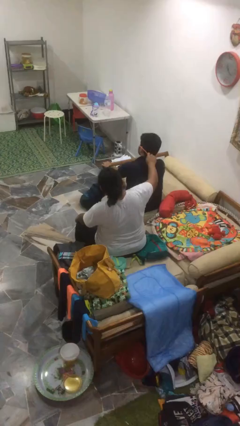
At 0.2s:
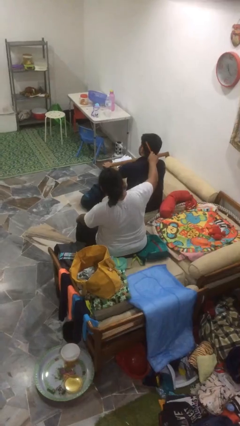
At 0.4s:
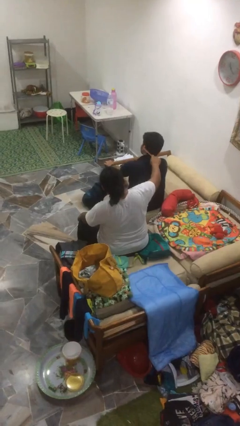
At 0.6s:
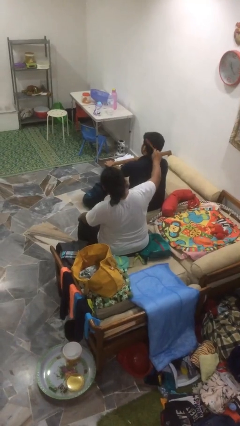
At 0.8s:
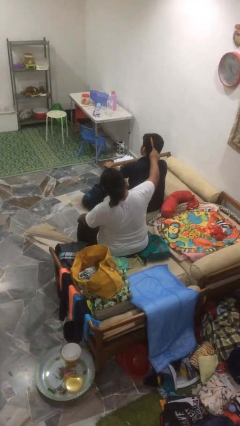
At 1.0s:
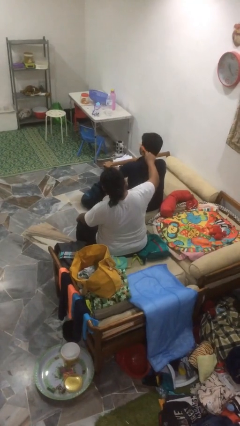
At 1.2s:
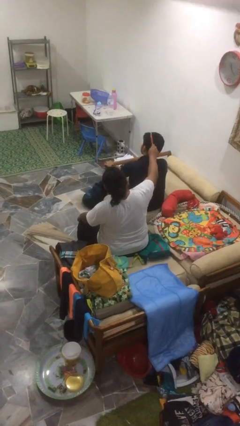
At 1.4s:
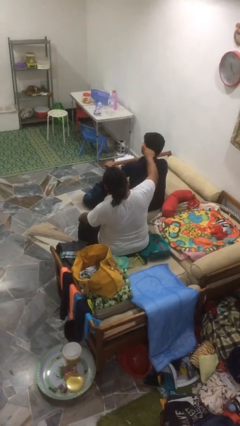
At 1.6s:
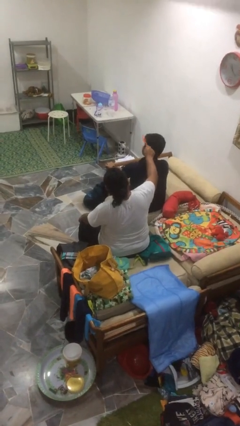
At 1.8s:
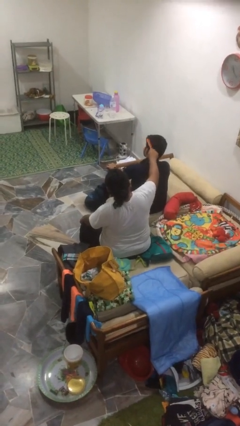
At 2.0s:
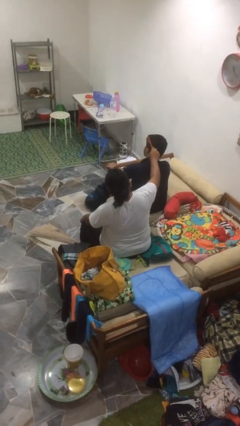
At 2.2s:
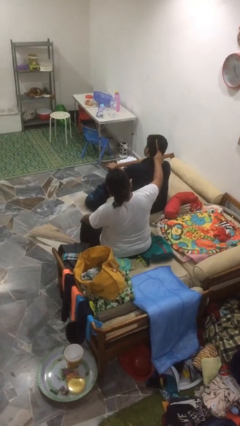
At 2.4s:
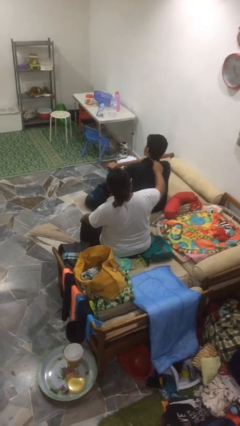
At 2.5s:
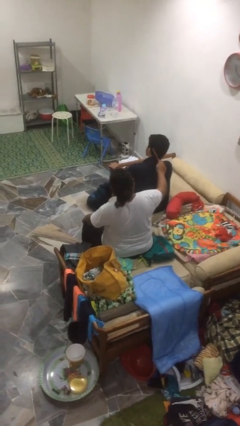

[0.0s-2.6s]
person brushes hair of person

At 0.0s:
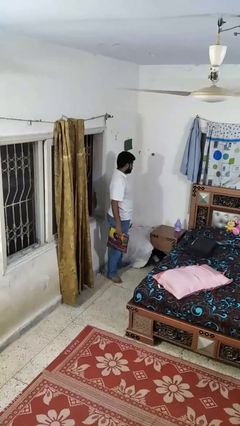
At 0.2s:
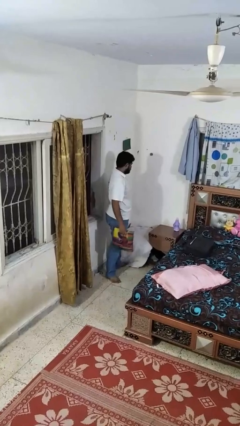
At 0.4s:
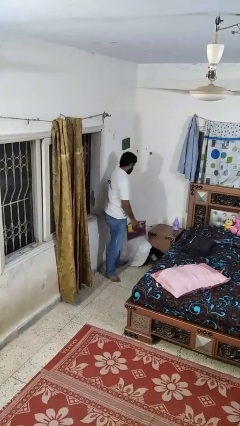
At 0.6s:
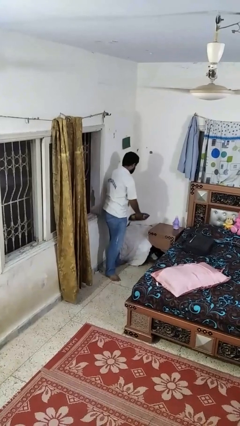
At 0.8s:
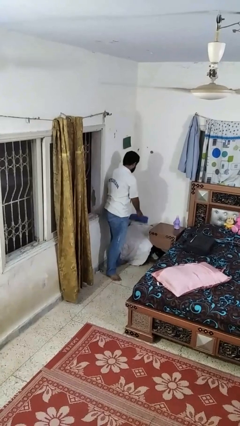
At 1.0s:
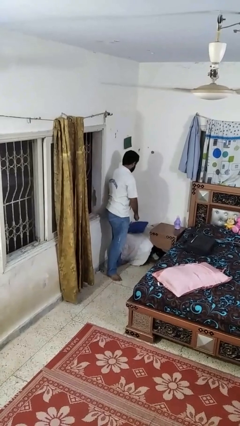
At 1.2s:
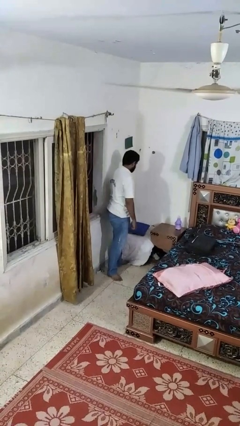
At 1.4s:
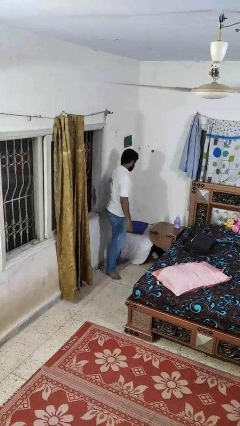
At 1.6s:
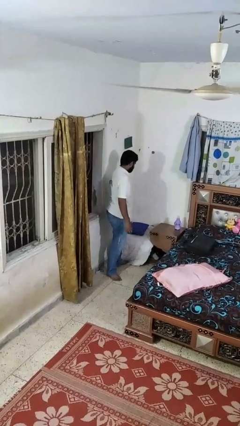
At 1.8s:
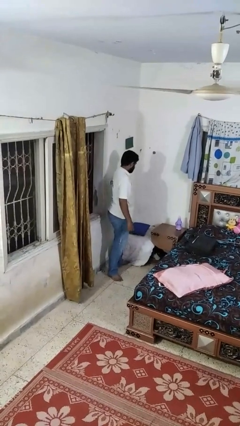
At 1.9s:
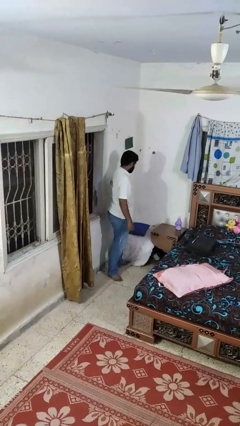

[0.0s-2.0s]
person puts down object on couch

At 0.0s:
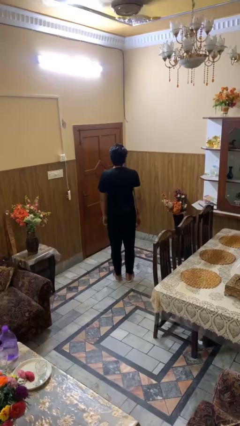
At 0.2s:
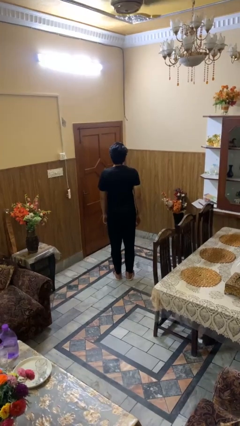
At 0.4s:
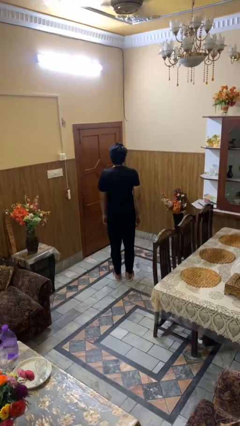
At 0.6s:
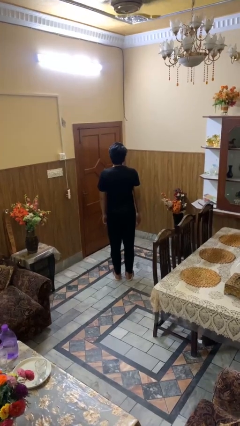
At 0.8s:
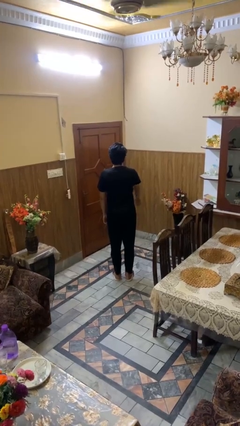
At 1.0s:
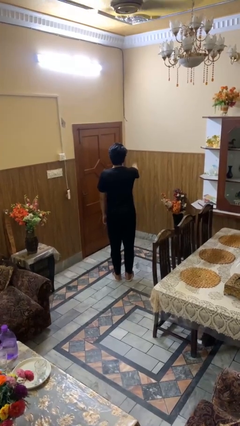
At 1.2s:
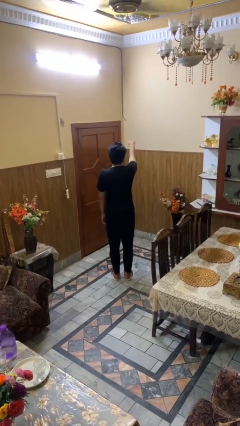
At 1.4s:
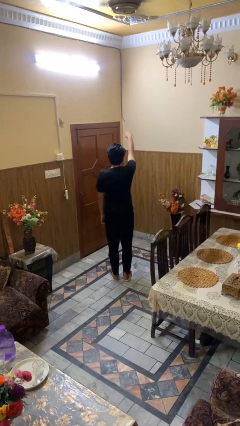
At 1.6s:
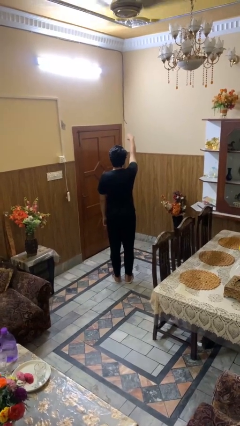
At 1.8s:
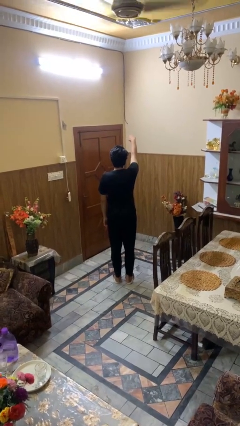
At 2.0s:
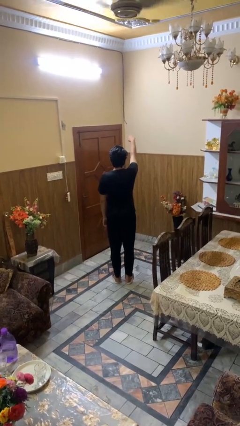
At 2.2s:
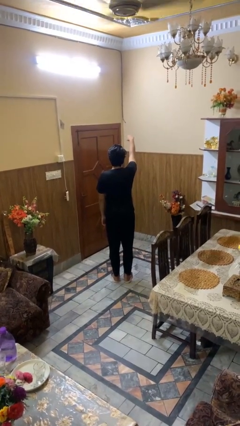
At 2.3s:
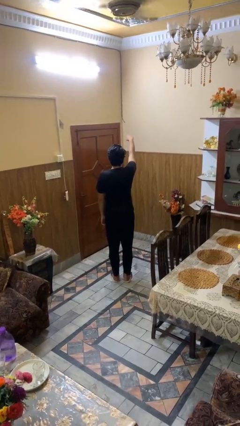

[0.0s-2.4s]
person gestures swipe up

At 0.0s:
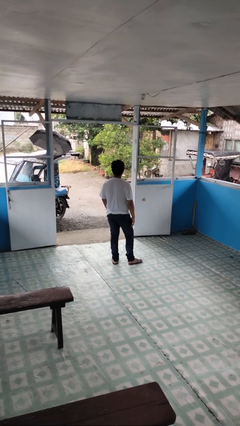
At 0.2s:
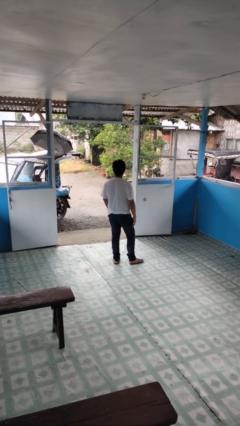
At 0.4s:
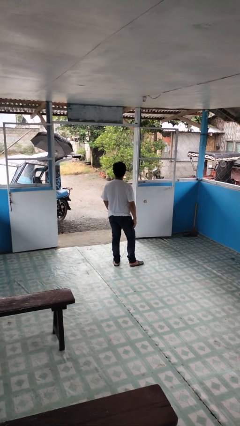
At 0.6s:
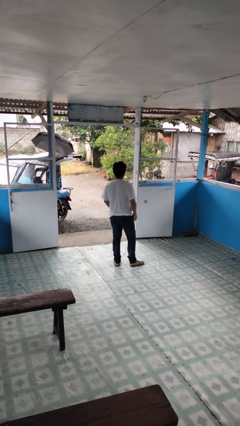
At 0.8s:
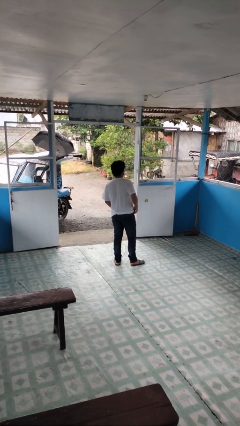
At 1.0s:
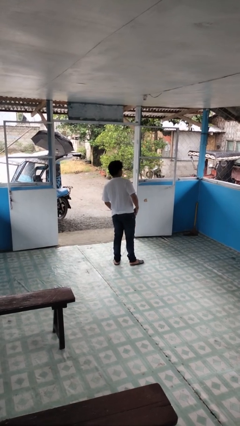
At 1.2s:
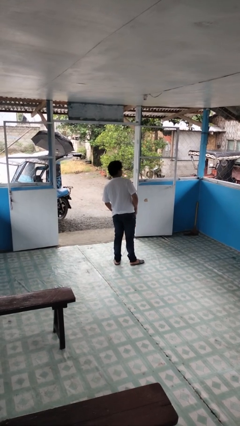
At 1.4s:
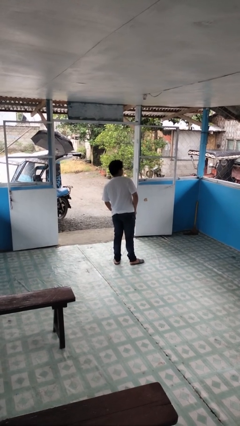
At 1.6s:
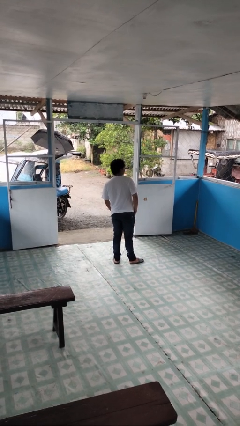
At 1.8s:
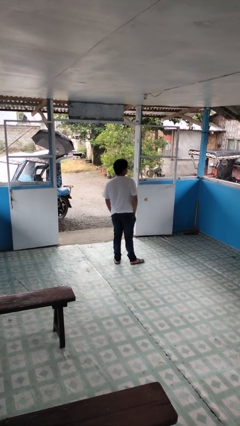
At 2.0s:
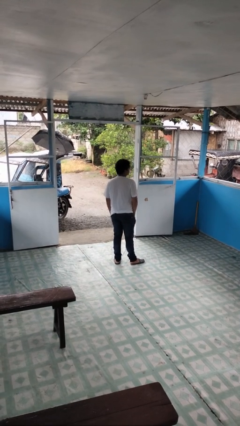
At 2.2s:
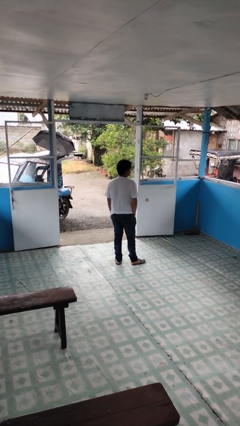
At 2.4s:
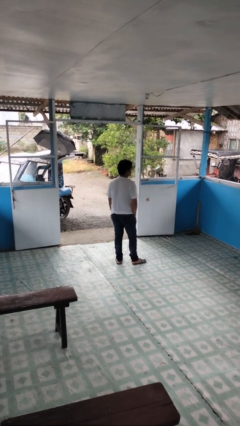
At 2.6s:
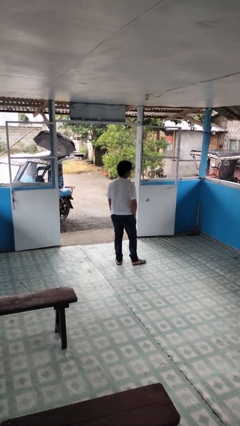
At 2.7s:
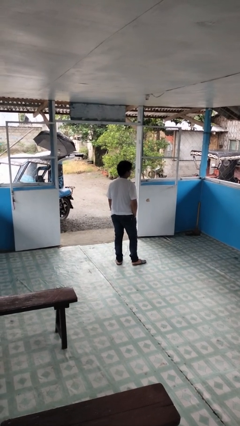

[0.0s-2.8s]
person puts hands in back pockets

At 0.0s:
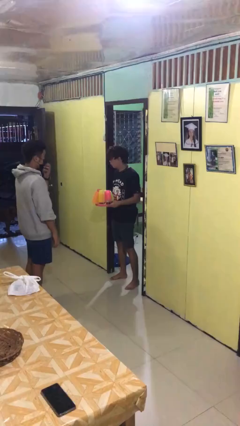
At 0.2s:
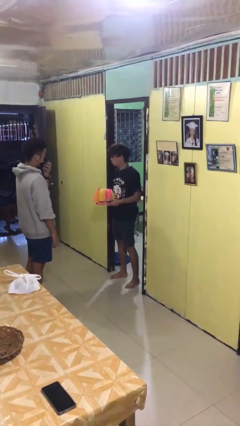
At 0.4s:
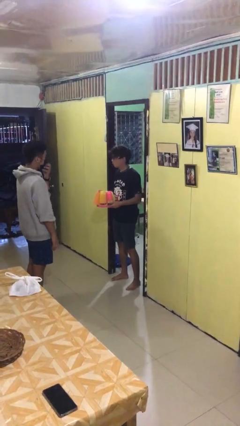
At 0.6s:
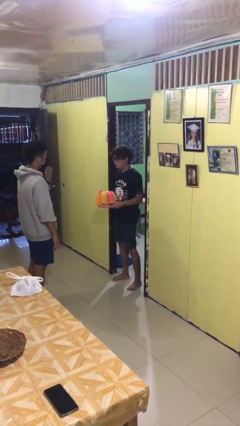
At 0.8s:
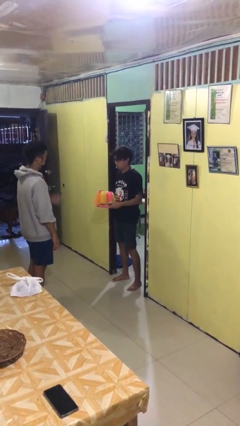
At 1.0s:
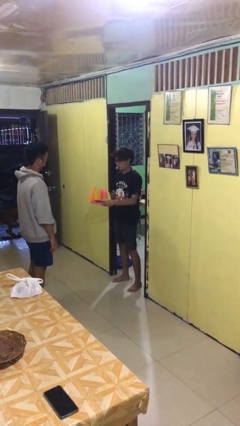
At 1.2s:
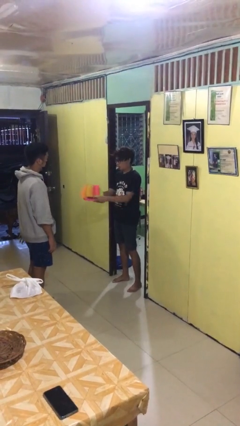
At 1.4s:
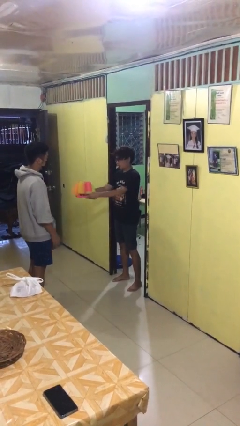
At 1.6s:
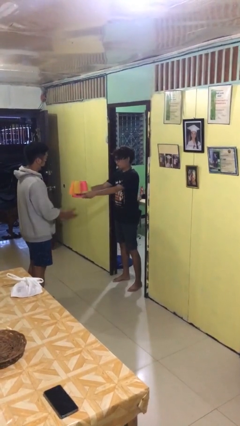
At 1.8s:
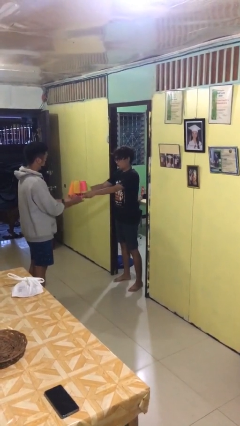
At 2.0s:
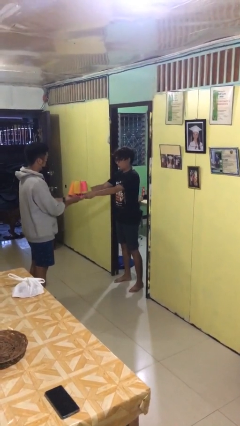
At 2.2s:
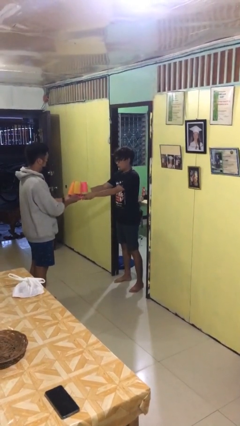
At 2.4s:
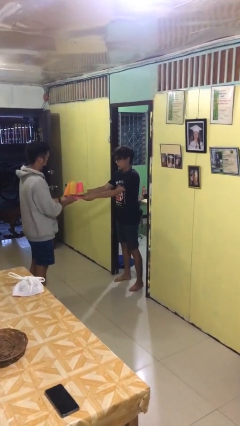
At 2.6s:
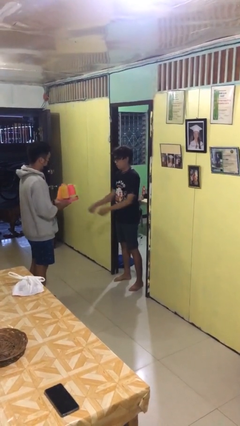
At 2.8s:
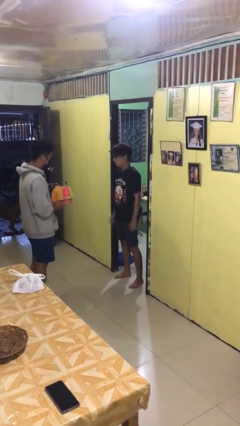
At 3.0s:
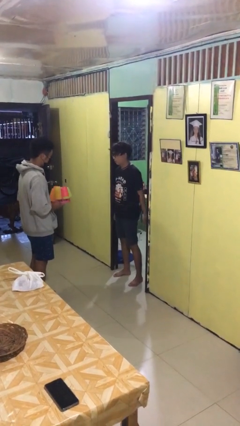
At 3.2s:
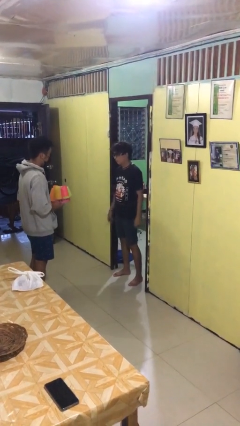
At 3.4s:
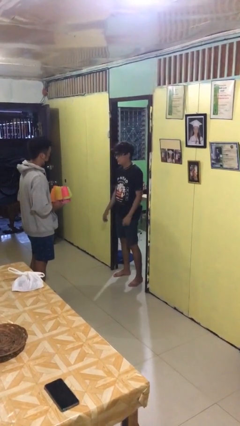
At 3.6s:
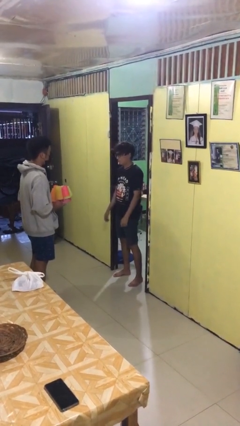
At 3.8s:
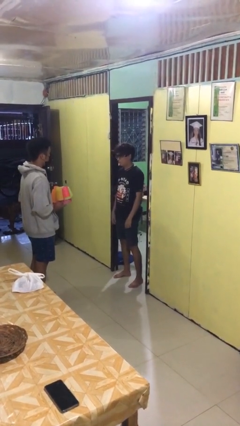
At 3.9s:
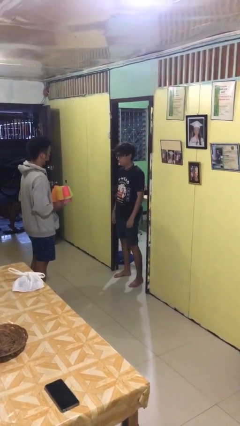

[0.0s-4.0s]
person transfers object to person

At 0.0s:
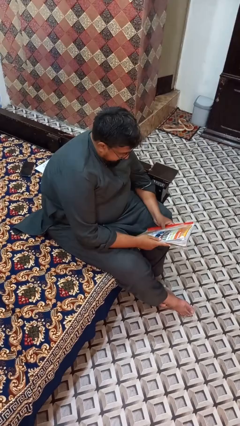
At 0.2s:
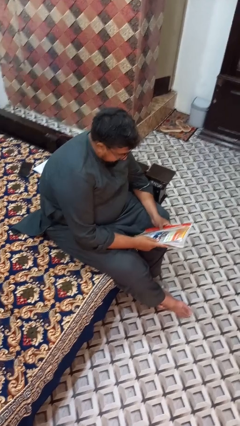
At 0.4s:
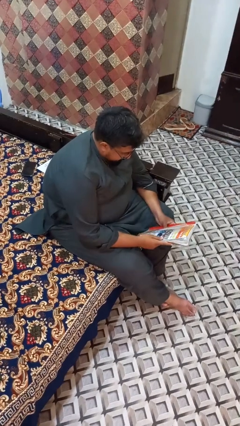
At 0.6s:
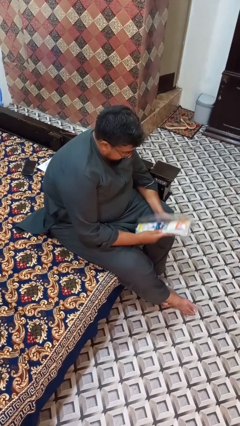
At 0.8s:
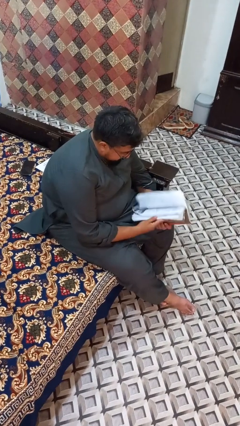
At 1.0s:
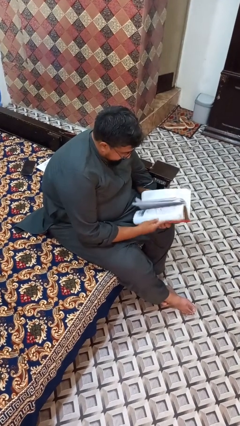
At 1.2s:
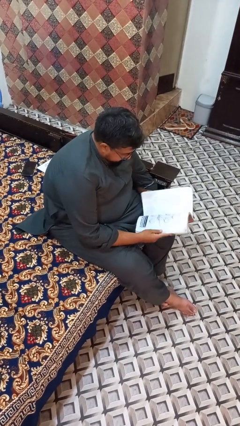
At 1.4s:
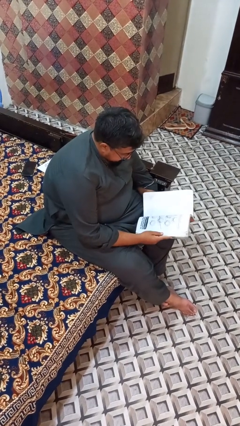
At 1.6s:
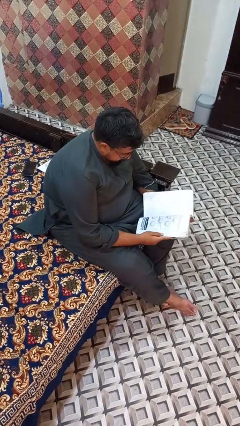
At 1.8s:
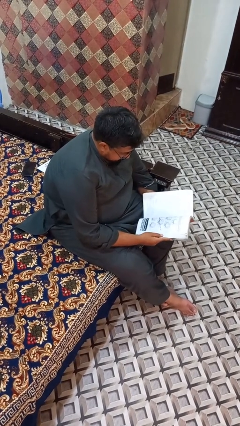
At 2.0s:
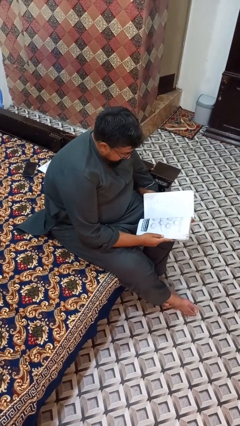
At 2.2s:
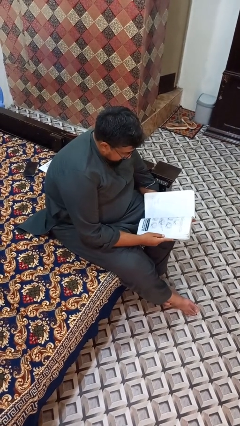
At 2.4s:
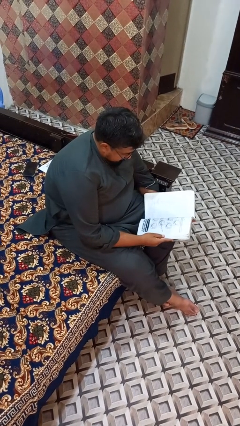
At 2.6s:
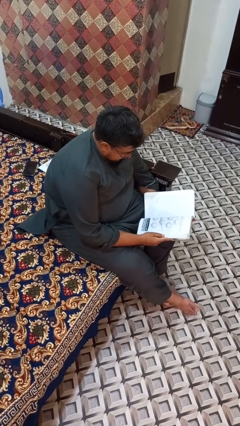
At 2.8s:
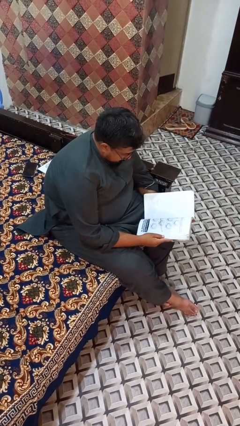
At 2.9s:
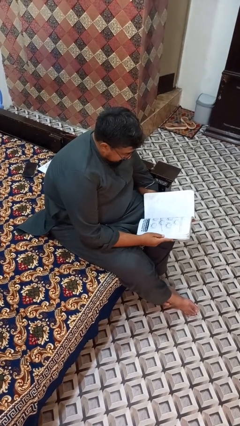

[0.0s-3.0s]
person reads book

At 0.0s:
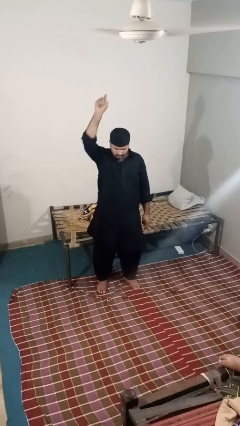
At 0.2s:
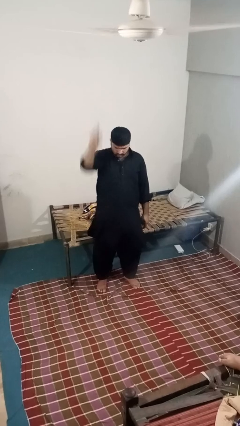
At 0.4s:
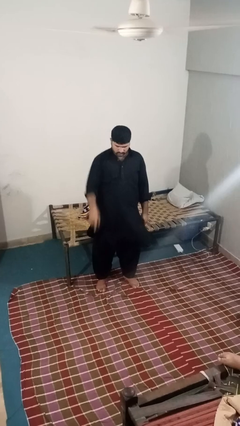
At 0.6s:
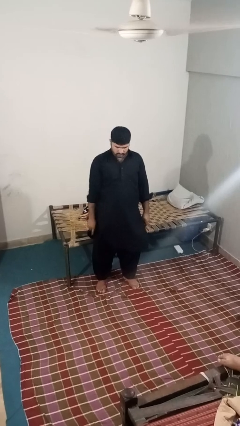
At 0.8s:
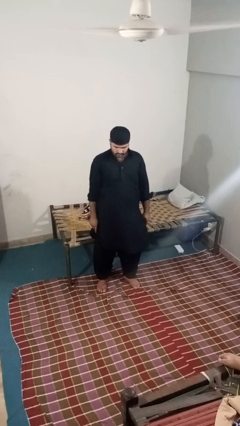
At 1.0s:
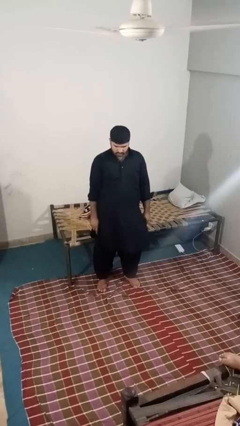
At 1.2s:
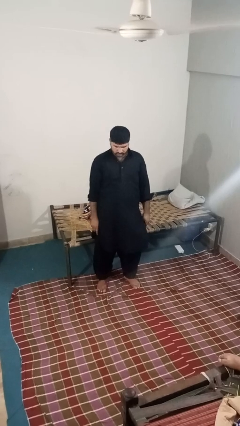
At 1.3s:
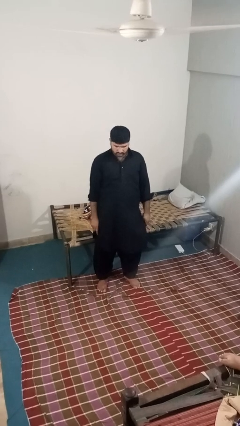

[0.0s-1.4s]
person gestures swipe down
